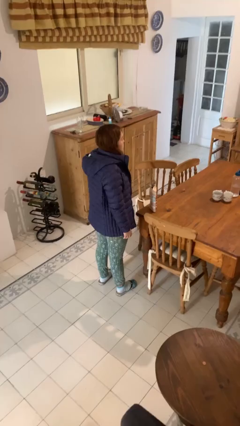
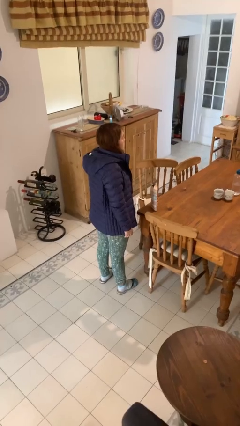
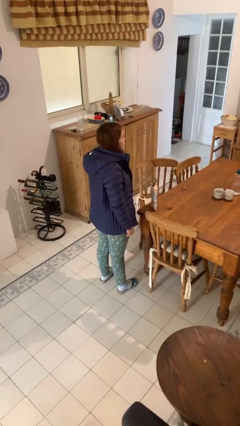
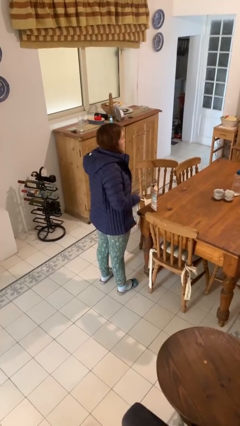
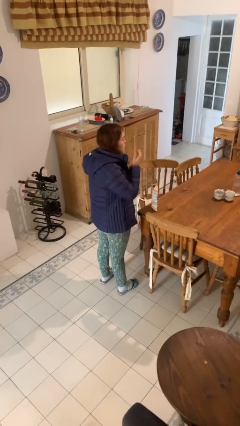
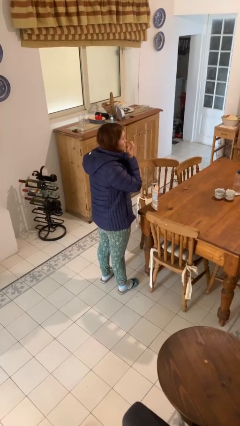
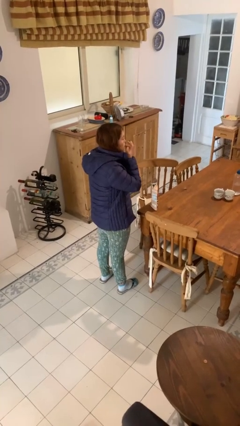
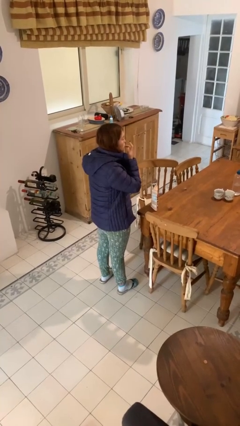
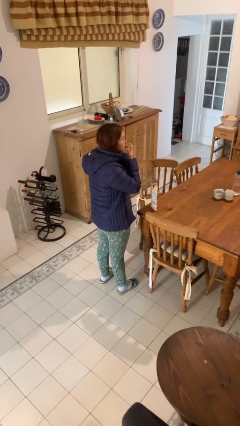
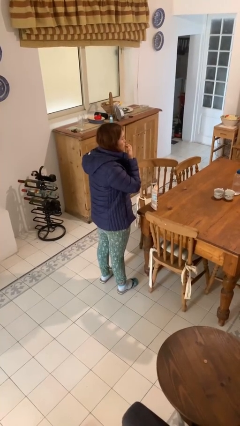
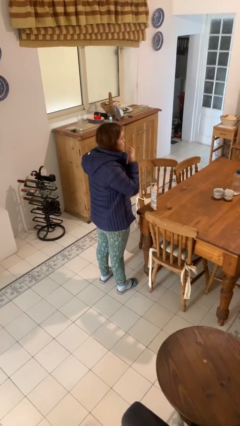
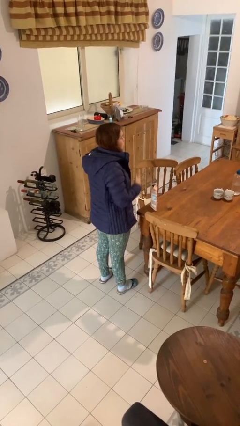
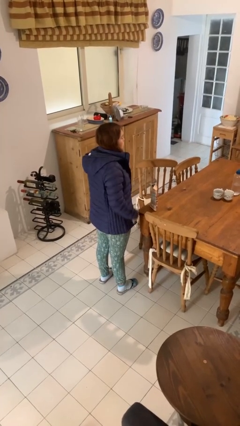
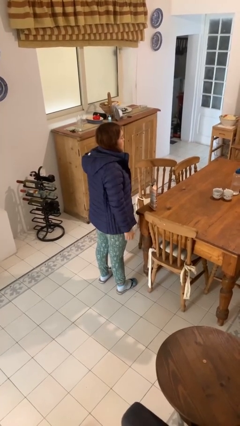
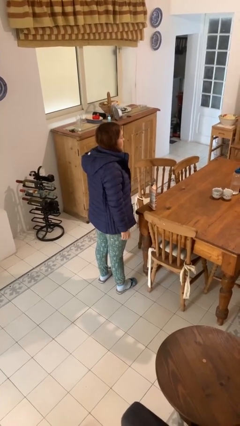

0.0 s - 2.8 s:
person licks fingers

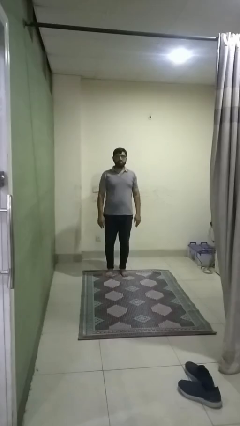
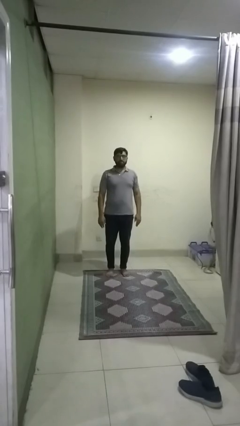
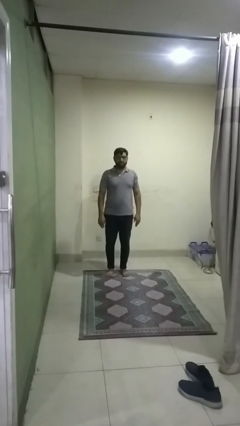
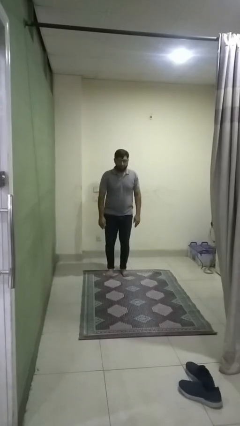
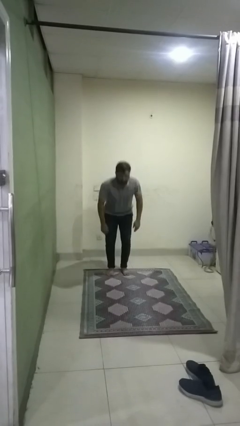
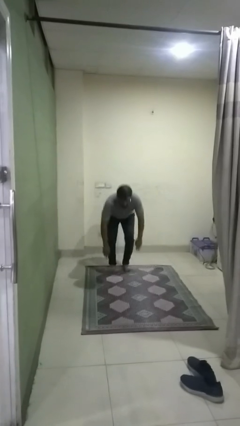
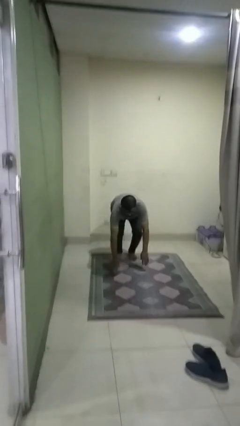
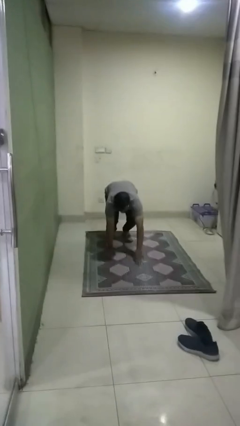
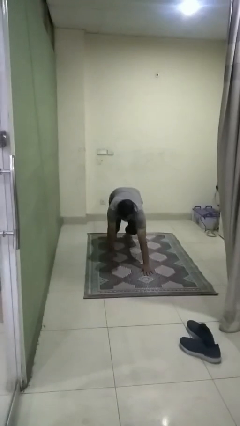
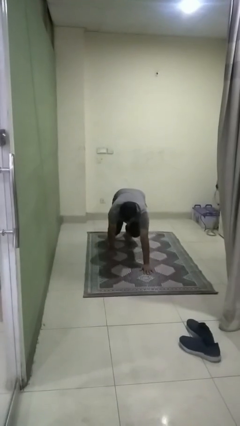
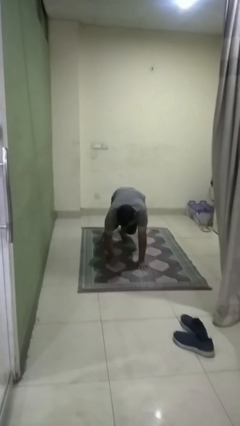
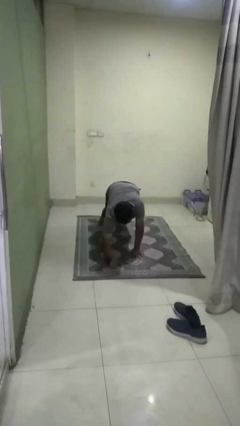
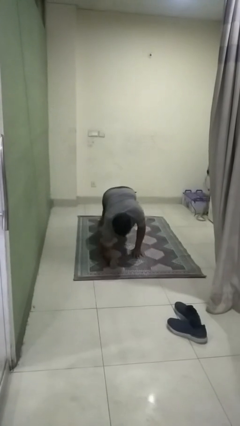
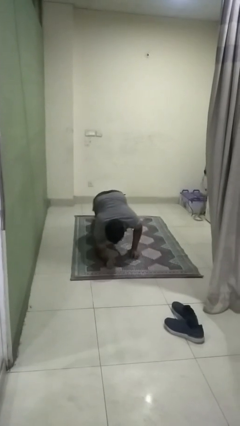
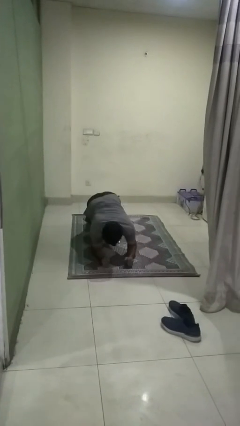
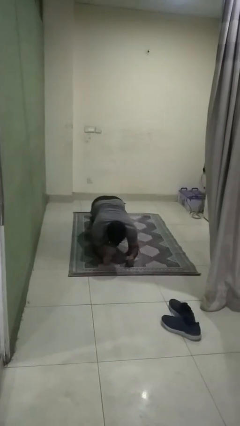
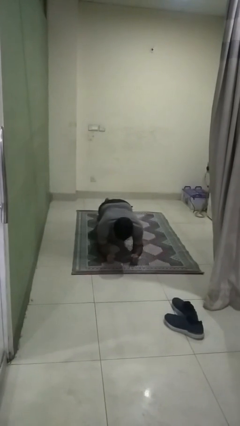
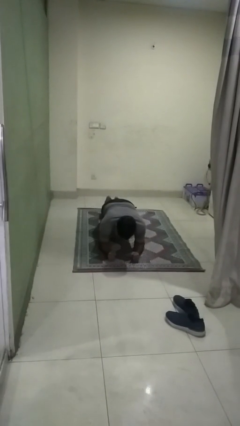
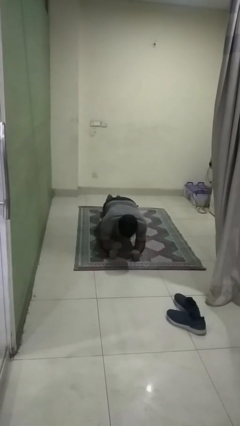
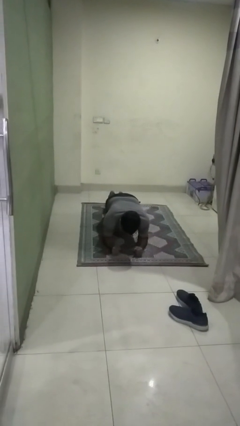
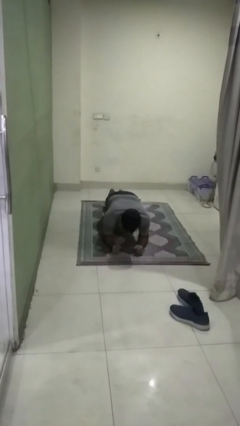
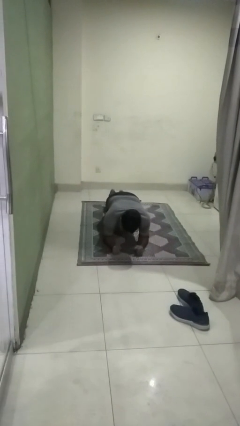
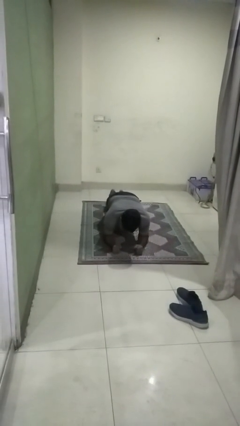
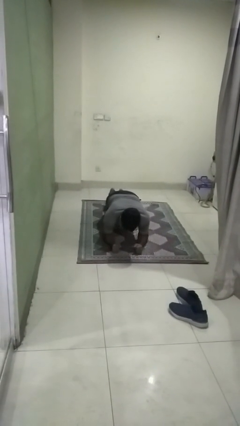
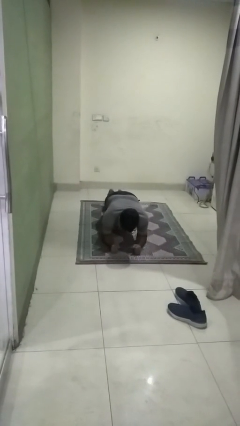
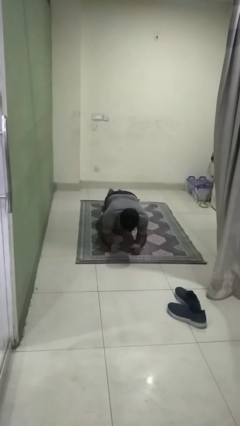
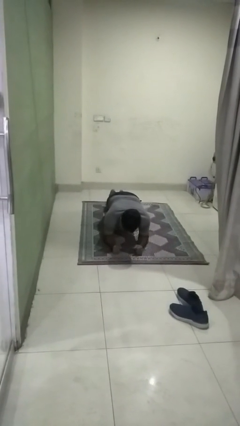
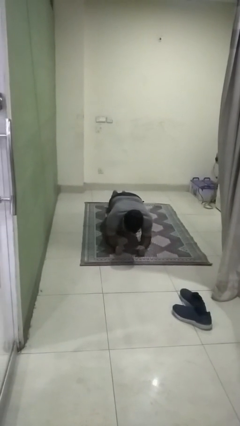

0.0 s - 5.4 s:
person exercises with plank

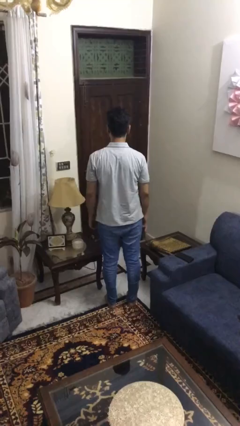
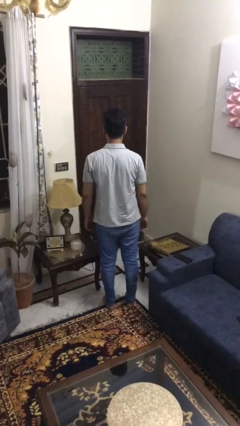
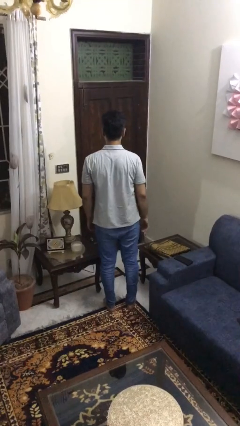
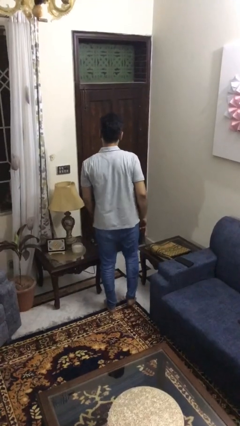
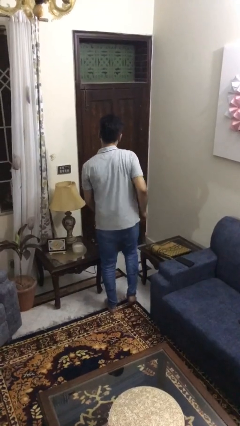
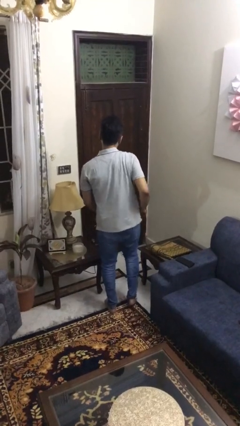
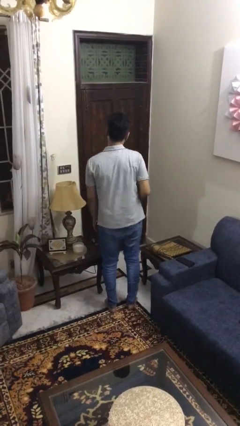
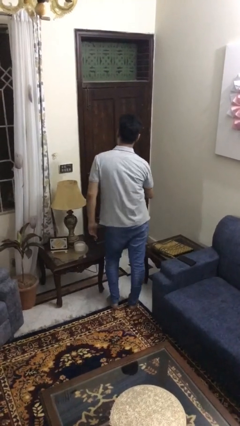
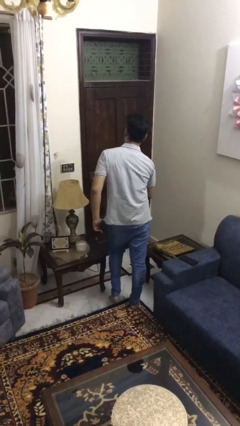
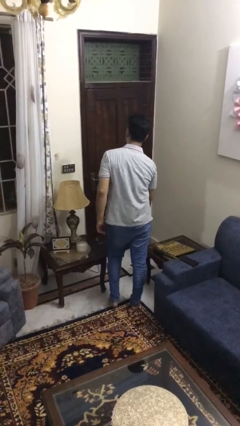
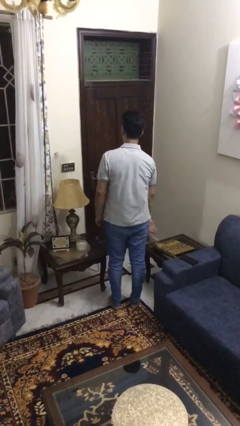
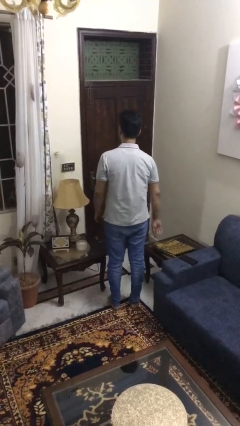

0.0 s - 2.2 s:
person dances in place

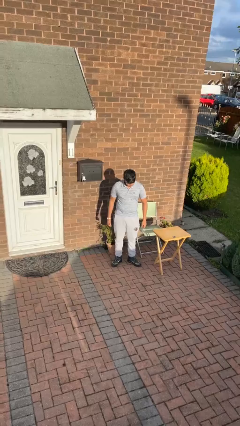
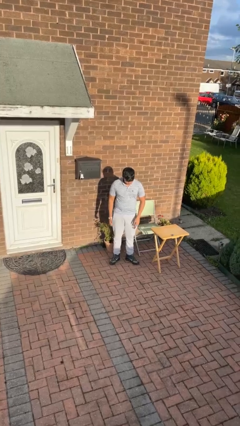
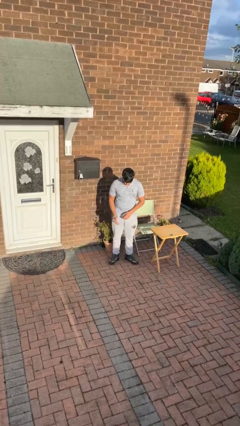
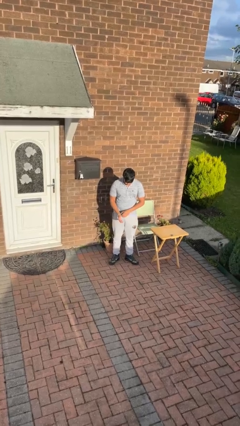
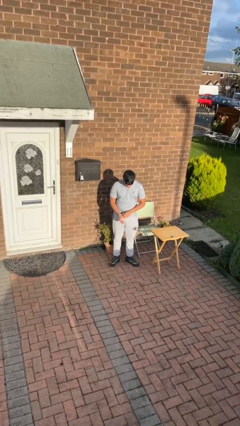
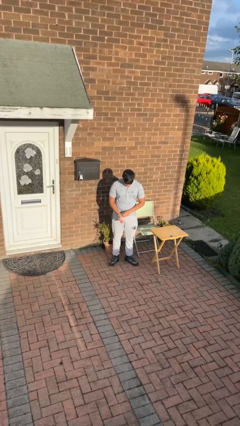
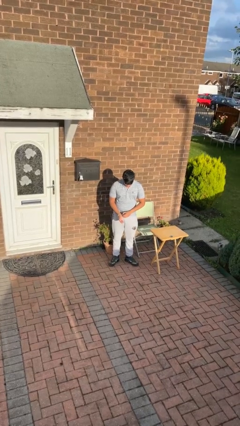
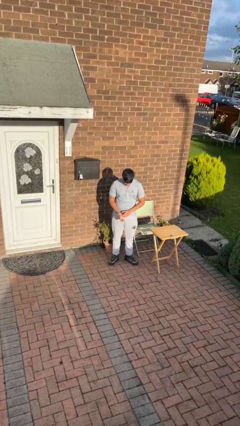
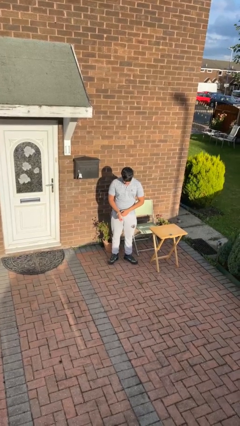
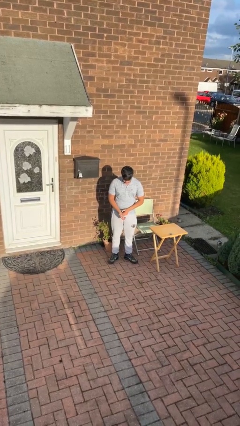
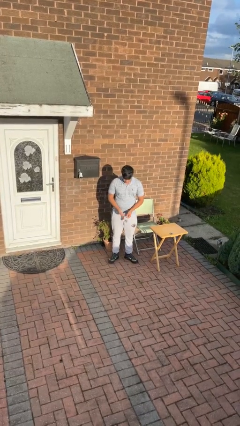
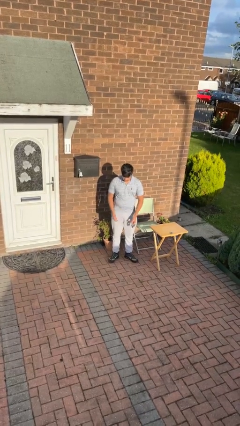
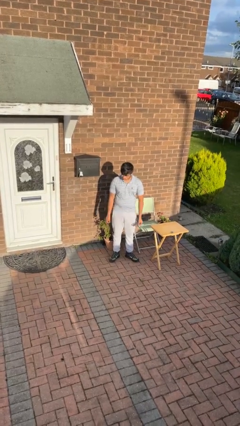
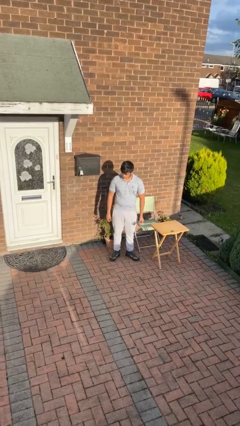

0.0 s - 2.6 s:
person takes off wristwatch

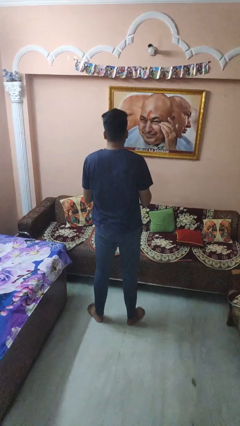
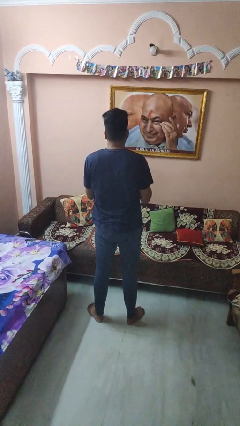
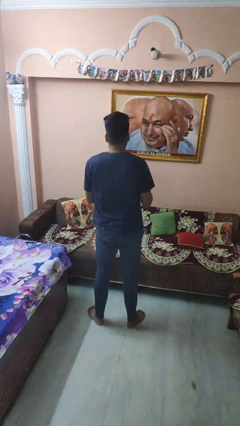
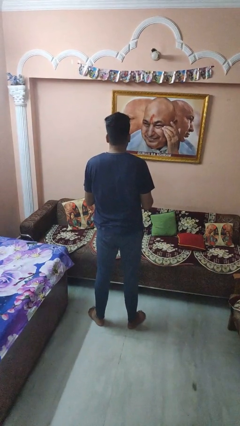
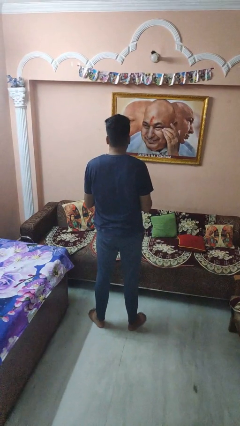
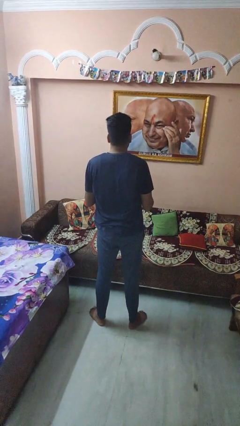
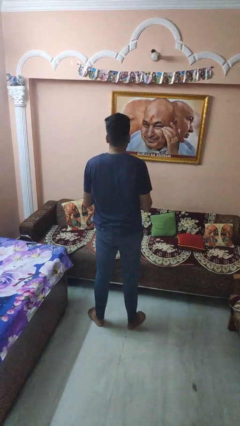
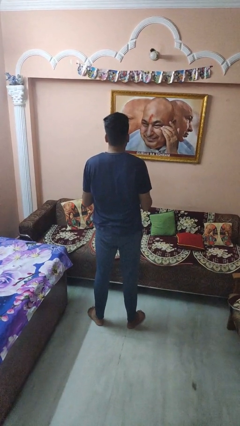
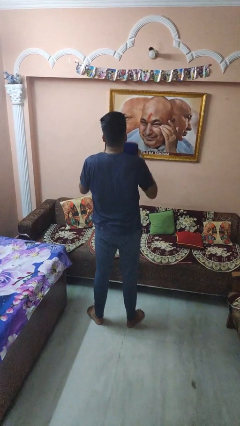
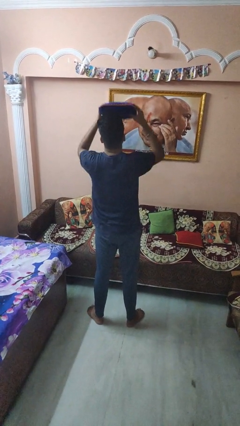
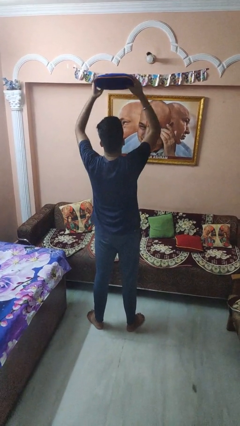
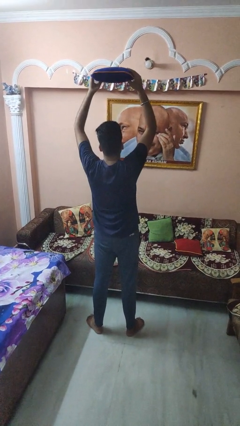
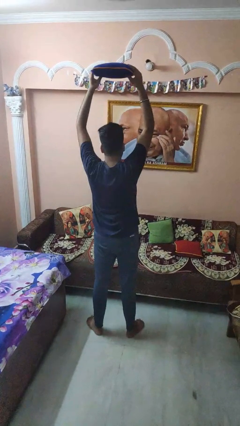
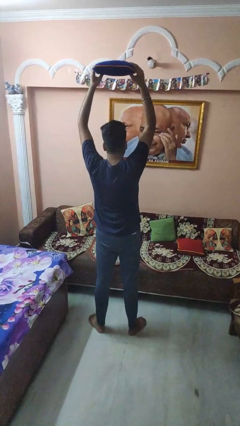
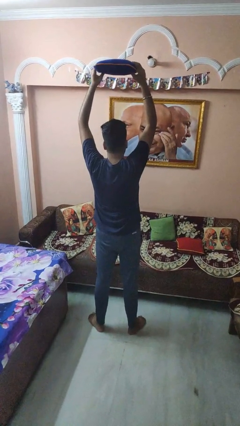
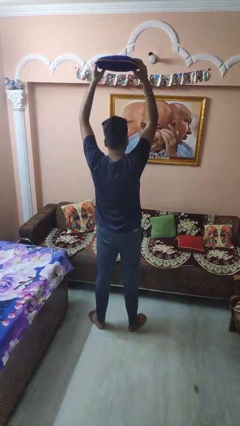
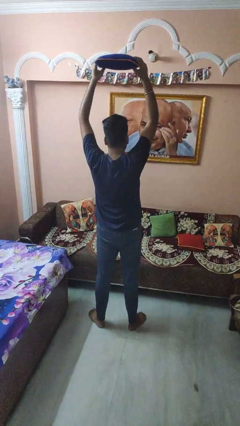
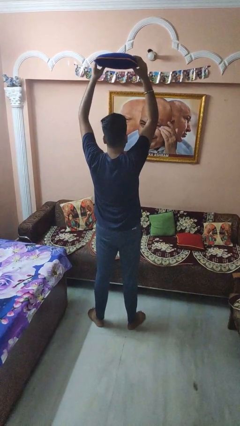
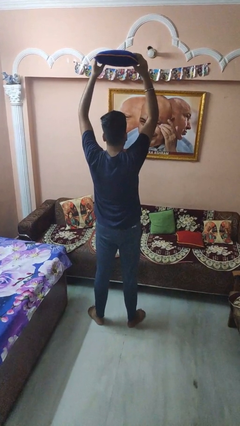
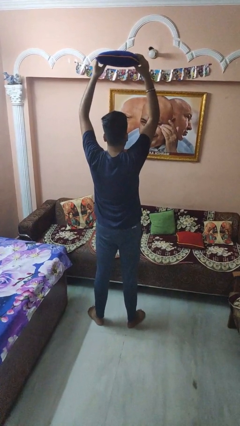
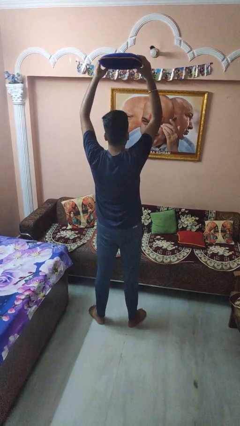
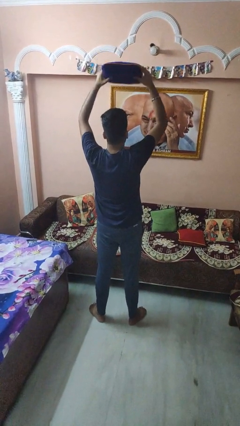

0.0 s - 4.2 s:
person holds object above head
